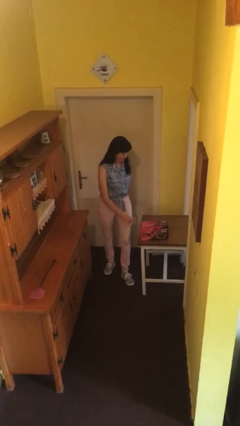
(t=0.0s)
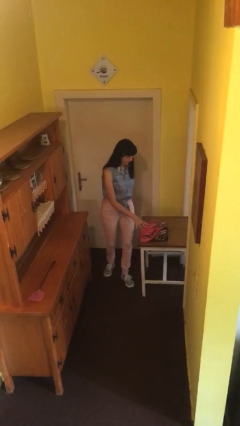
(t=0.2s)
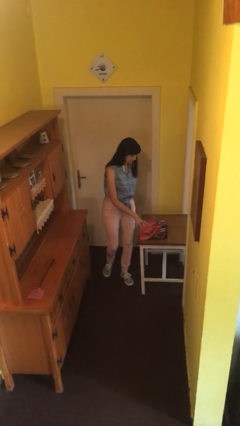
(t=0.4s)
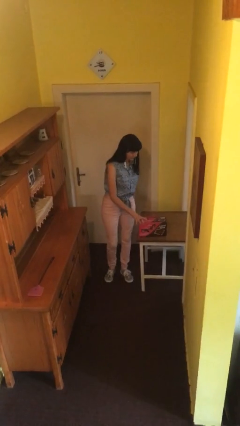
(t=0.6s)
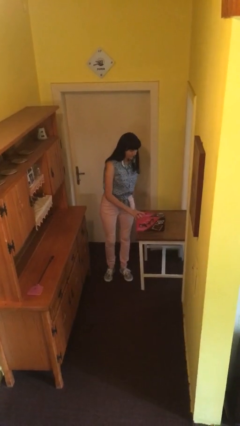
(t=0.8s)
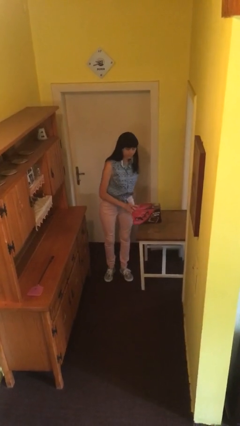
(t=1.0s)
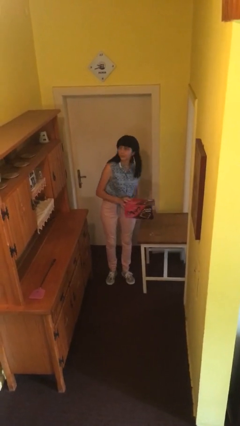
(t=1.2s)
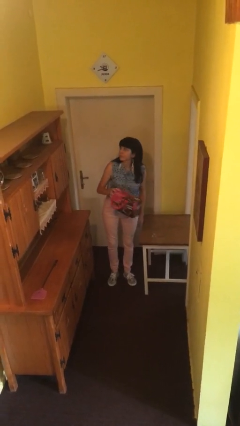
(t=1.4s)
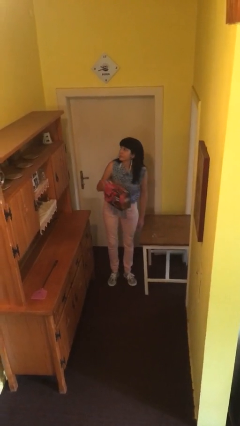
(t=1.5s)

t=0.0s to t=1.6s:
person picks up object from table

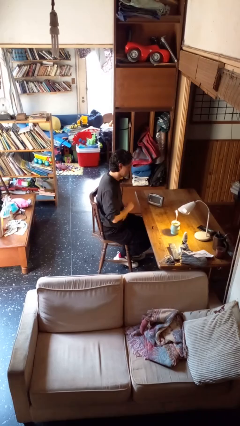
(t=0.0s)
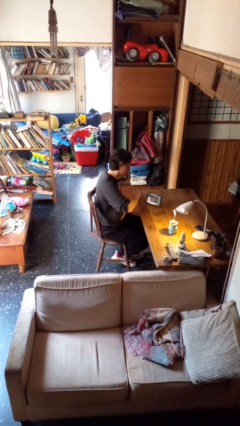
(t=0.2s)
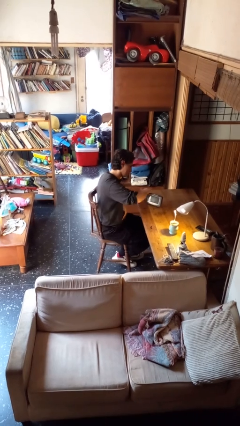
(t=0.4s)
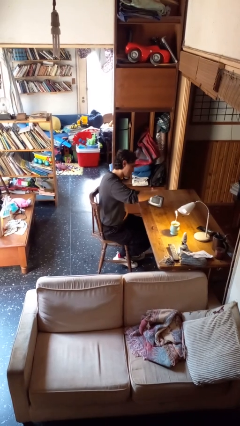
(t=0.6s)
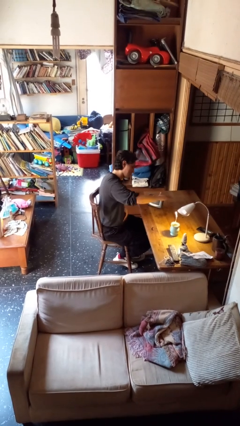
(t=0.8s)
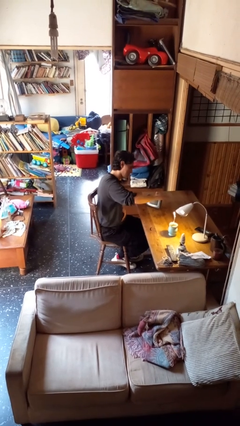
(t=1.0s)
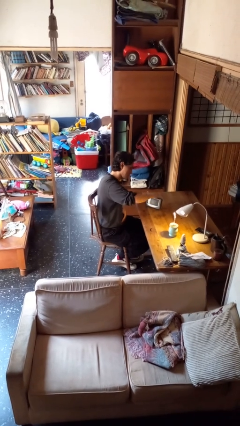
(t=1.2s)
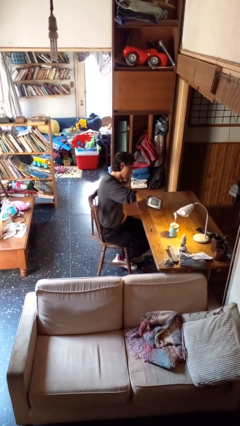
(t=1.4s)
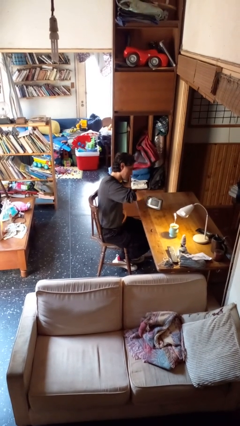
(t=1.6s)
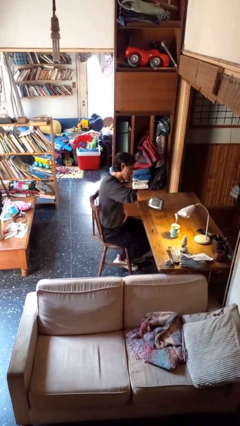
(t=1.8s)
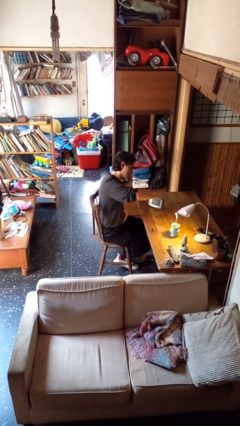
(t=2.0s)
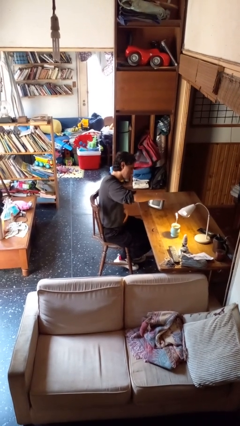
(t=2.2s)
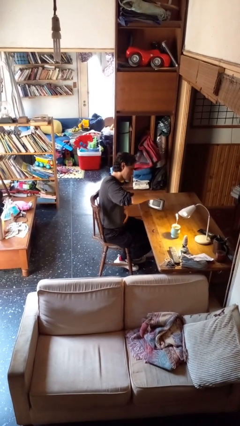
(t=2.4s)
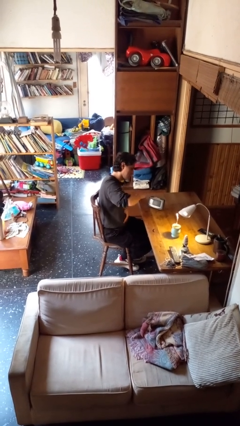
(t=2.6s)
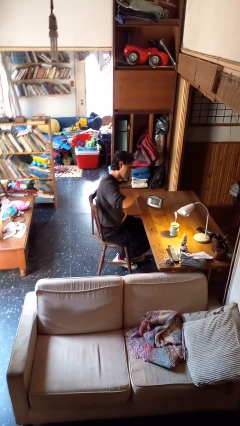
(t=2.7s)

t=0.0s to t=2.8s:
person waves hand over object

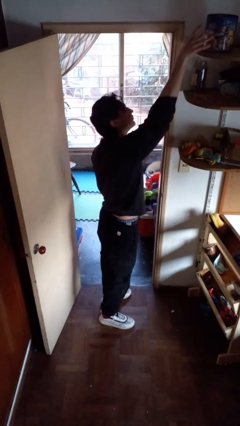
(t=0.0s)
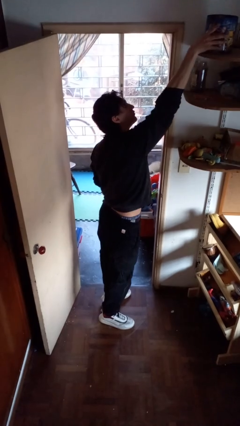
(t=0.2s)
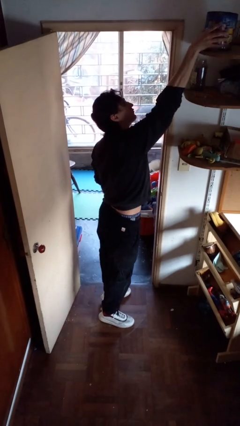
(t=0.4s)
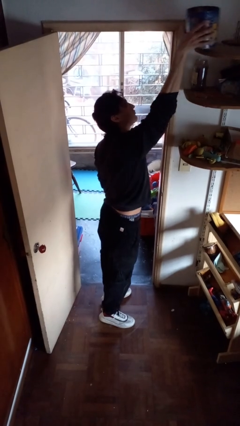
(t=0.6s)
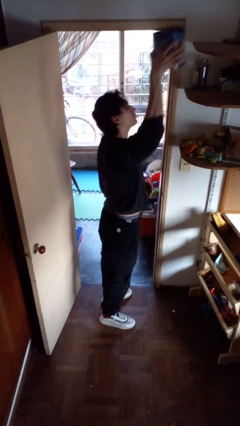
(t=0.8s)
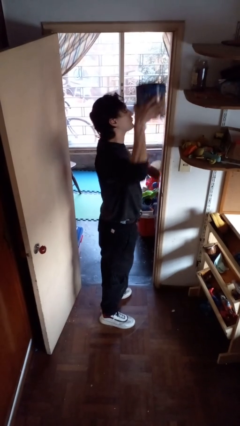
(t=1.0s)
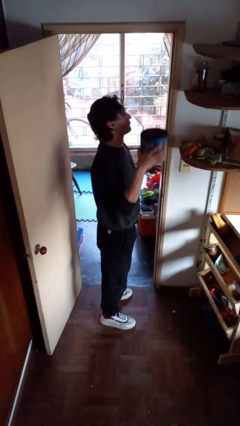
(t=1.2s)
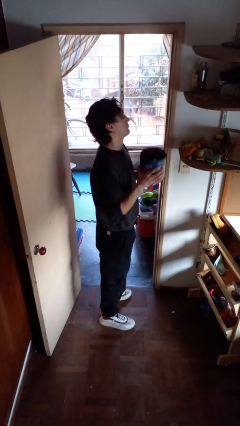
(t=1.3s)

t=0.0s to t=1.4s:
person picks up object from shelf

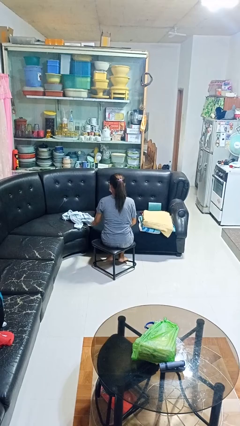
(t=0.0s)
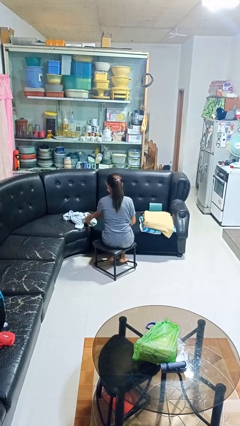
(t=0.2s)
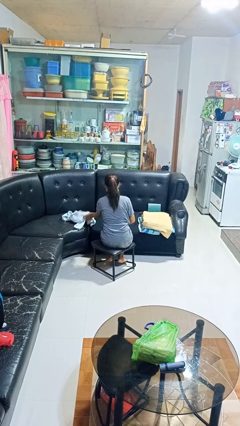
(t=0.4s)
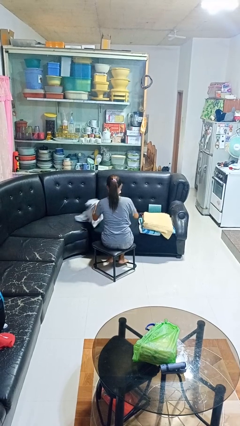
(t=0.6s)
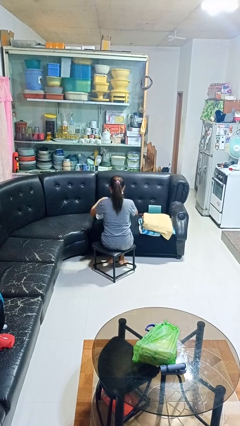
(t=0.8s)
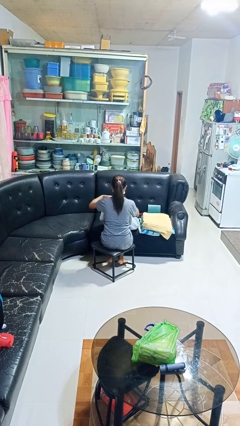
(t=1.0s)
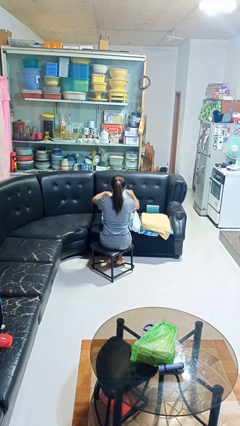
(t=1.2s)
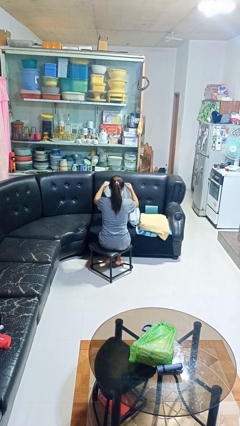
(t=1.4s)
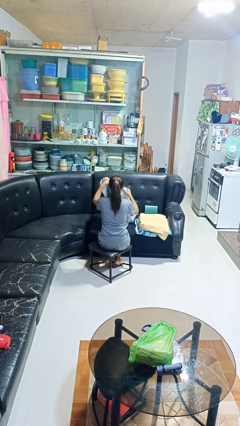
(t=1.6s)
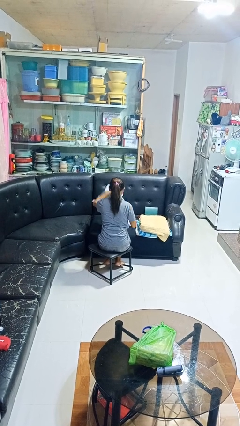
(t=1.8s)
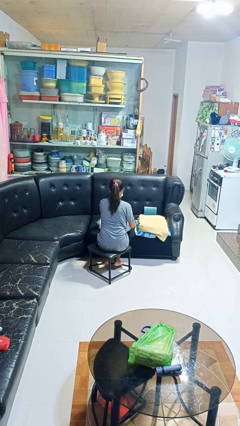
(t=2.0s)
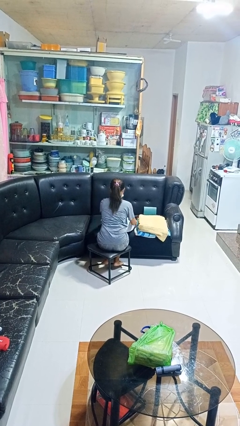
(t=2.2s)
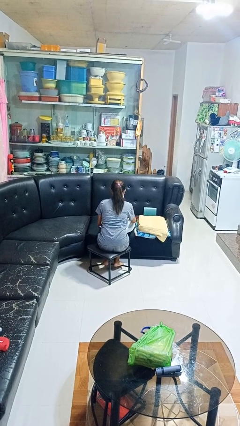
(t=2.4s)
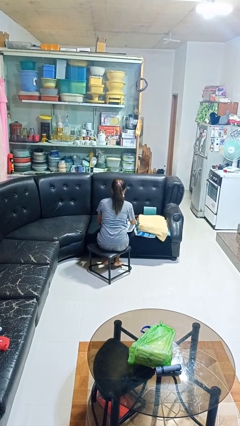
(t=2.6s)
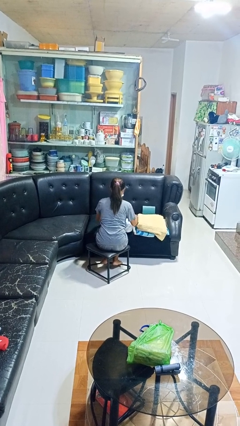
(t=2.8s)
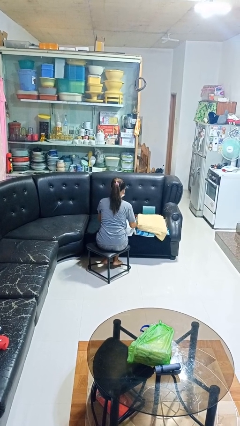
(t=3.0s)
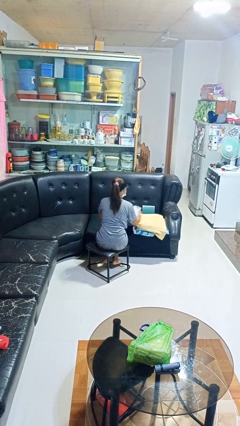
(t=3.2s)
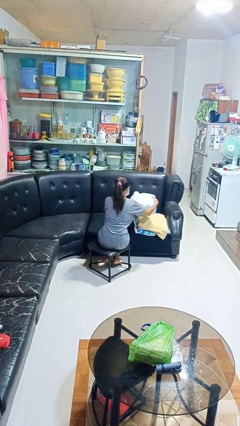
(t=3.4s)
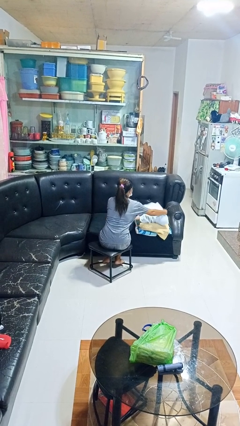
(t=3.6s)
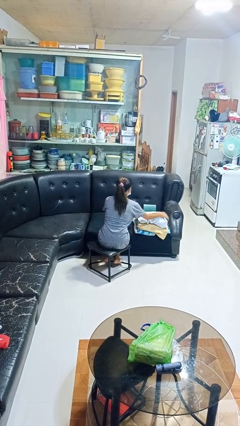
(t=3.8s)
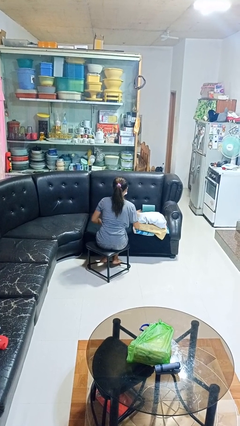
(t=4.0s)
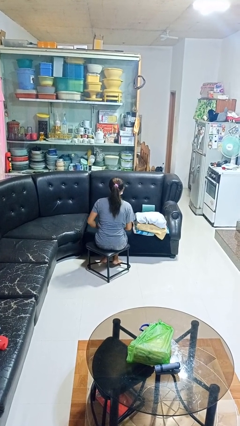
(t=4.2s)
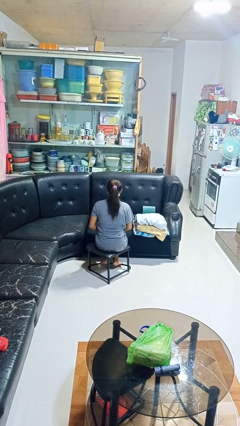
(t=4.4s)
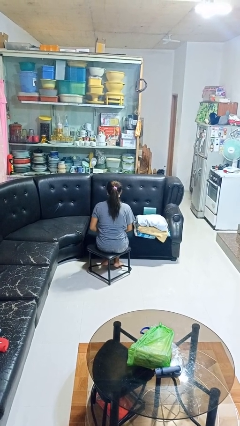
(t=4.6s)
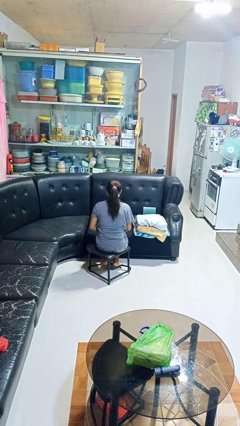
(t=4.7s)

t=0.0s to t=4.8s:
person folds towel

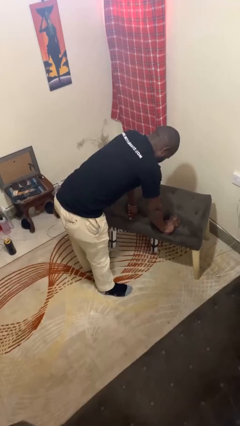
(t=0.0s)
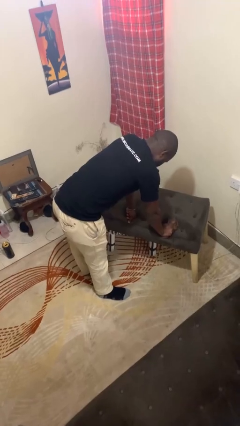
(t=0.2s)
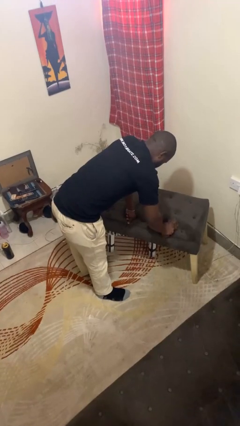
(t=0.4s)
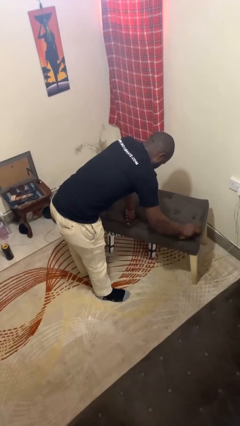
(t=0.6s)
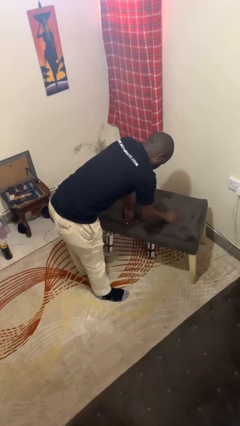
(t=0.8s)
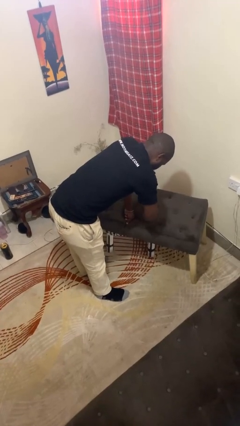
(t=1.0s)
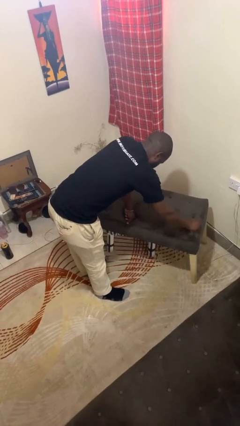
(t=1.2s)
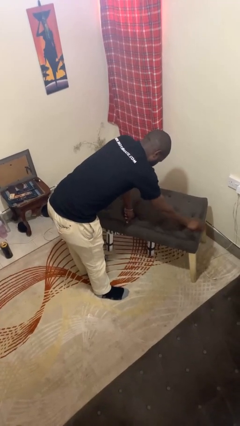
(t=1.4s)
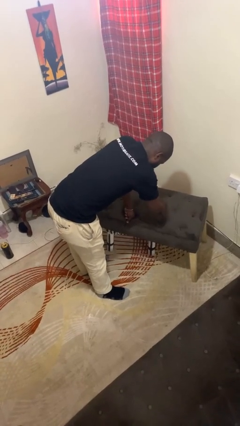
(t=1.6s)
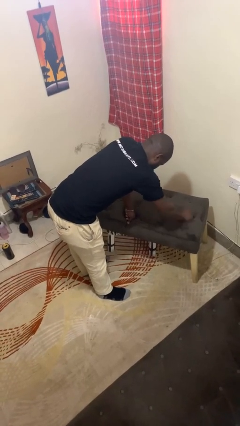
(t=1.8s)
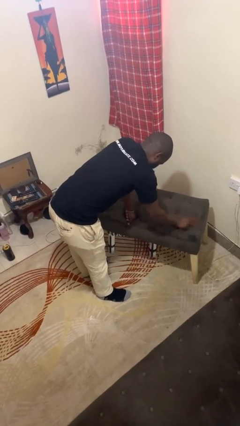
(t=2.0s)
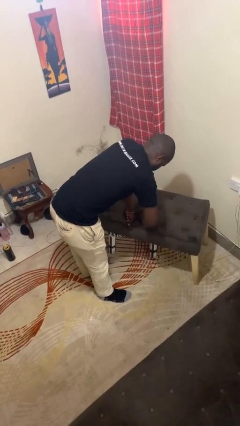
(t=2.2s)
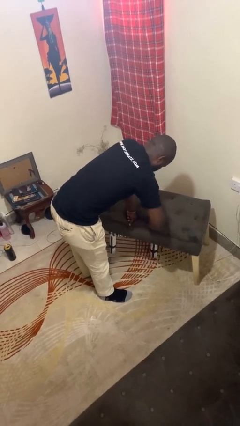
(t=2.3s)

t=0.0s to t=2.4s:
person cleans table with rag

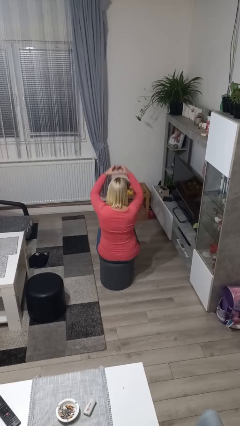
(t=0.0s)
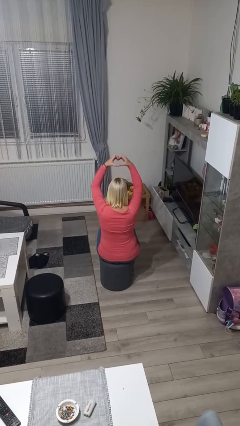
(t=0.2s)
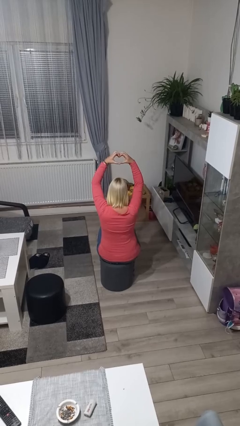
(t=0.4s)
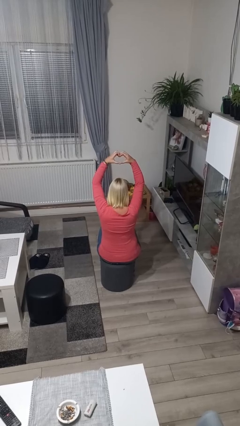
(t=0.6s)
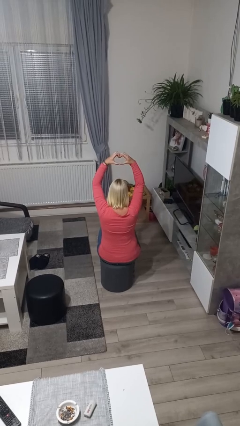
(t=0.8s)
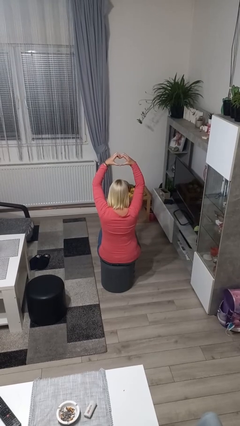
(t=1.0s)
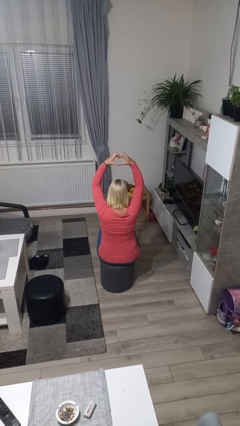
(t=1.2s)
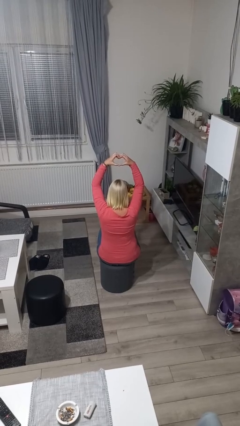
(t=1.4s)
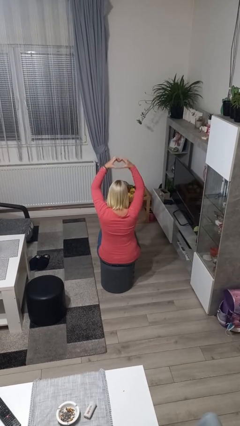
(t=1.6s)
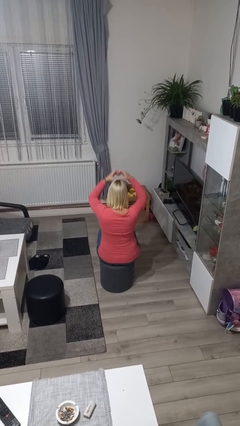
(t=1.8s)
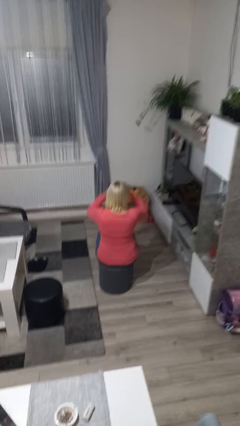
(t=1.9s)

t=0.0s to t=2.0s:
person gestures heart

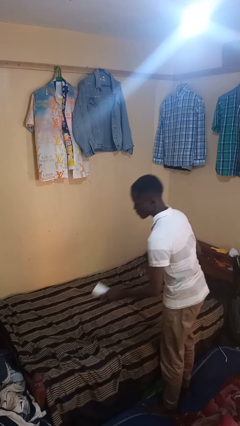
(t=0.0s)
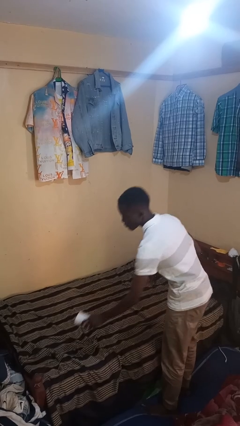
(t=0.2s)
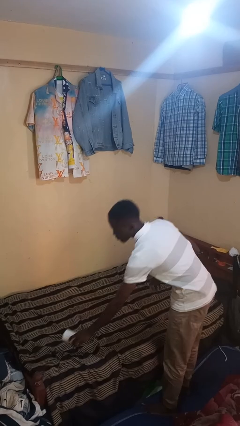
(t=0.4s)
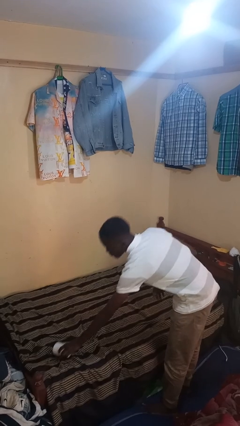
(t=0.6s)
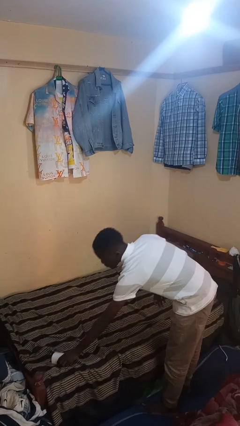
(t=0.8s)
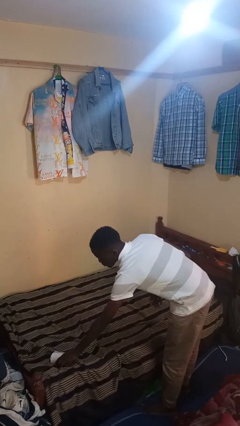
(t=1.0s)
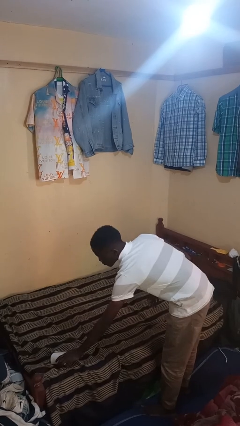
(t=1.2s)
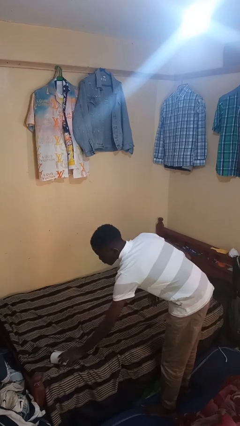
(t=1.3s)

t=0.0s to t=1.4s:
person puts down object on bed

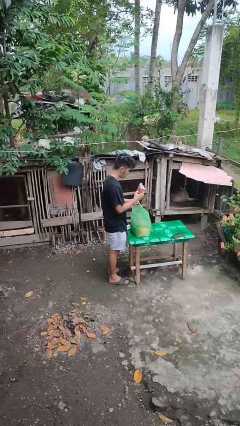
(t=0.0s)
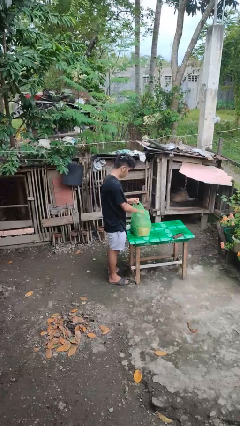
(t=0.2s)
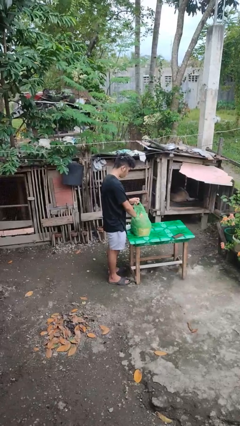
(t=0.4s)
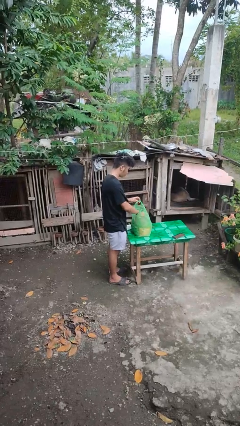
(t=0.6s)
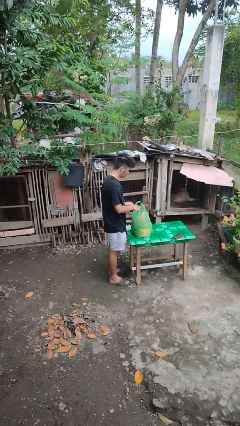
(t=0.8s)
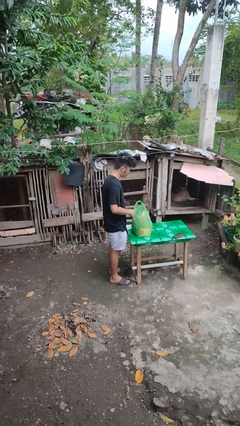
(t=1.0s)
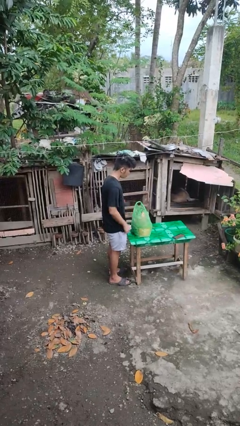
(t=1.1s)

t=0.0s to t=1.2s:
person puts object into bag
